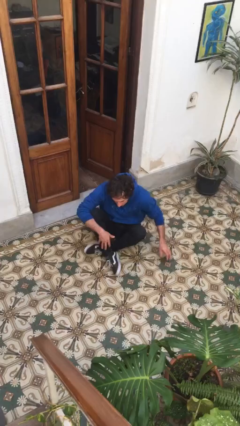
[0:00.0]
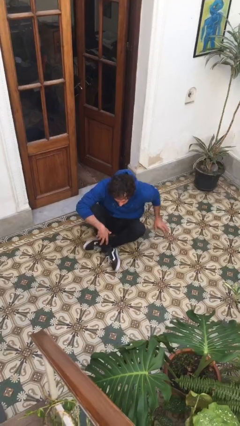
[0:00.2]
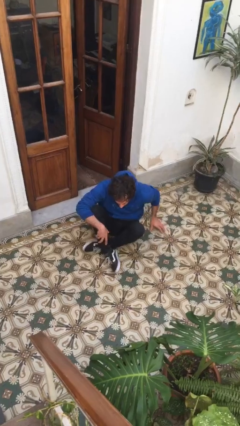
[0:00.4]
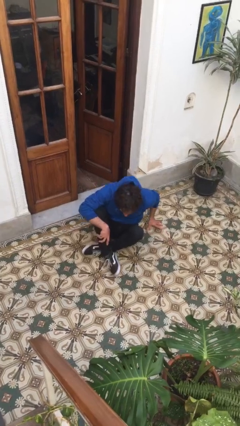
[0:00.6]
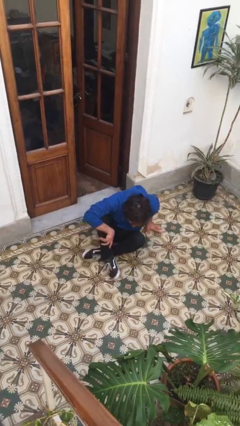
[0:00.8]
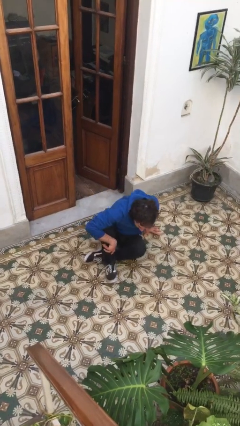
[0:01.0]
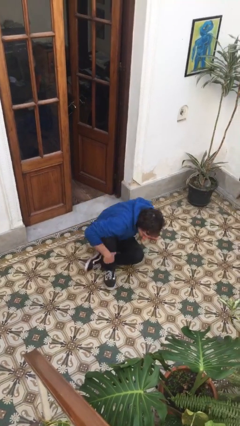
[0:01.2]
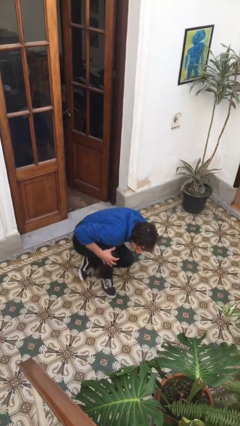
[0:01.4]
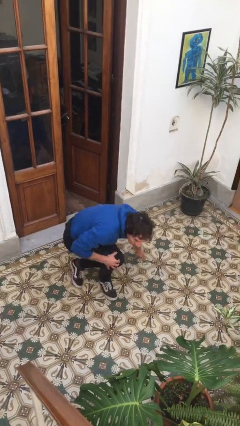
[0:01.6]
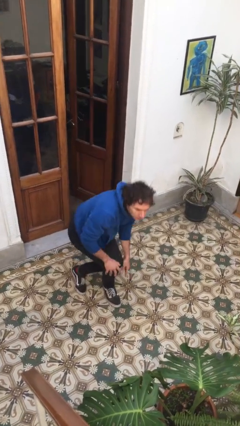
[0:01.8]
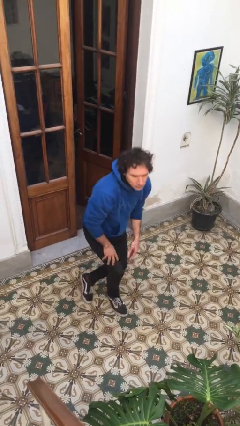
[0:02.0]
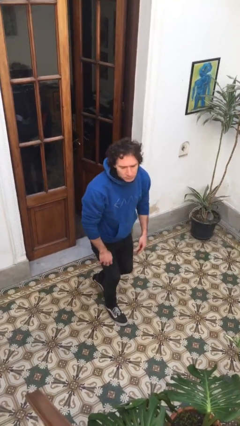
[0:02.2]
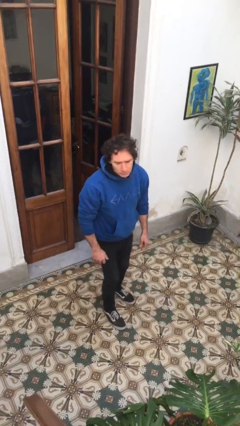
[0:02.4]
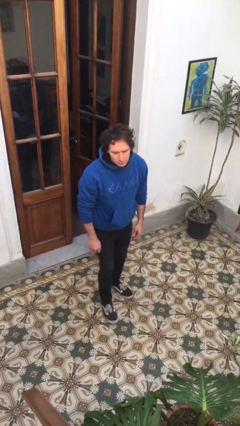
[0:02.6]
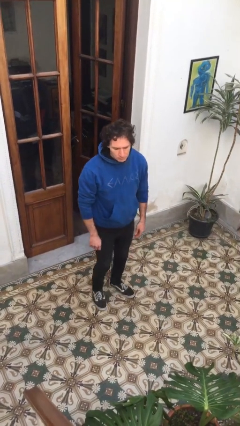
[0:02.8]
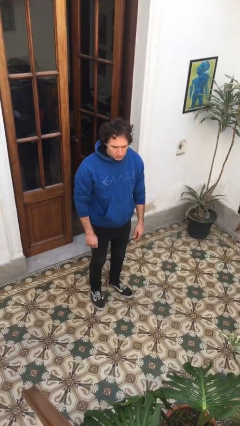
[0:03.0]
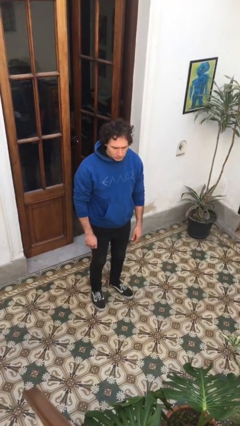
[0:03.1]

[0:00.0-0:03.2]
person stands up from floor

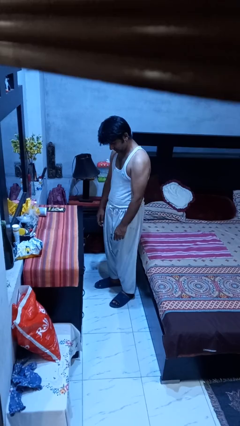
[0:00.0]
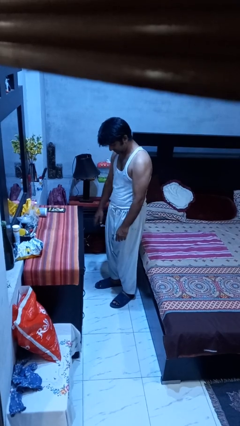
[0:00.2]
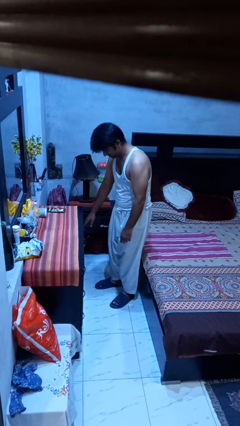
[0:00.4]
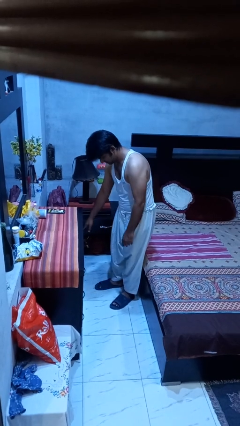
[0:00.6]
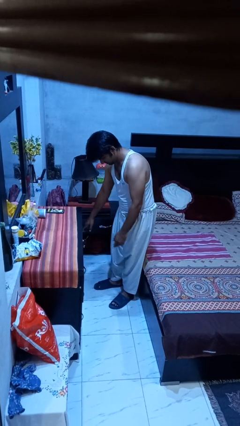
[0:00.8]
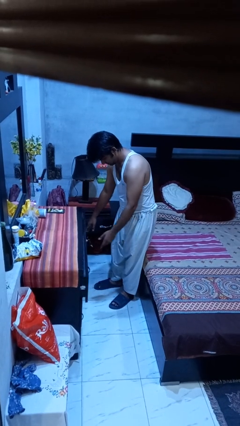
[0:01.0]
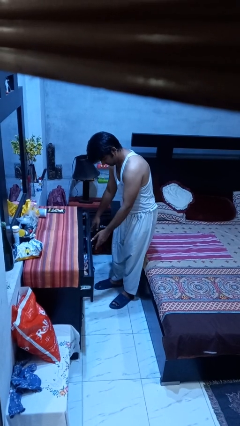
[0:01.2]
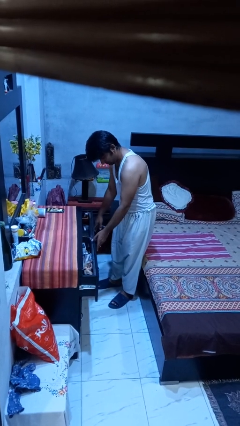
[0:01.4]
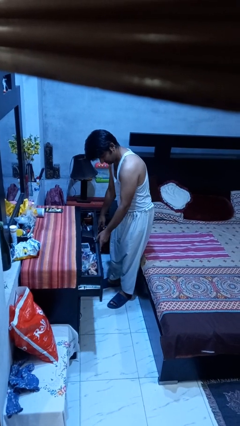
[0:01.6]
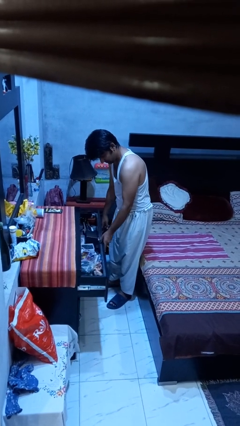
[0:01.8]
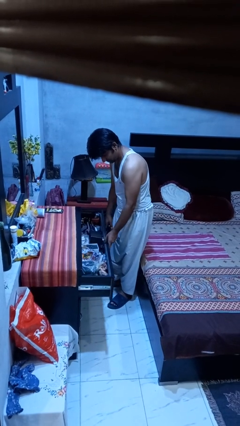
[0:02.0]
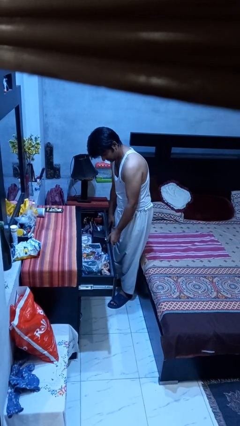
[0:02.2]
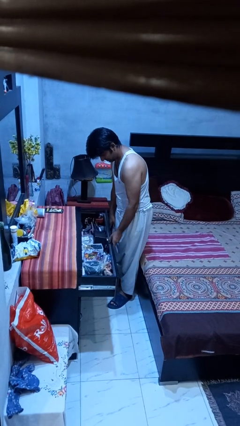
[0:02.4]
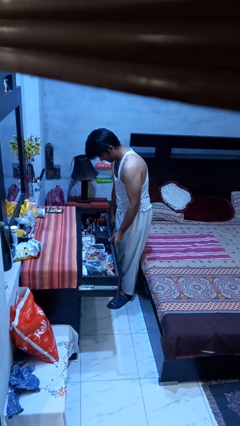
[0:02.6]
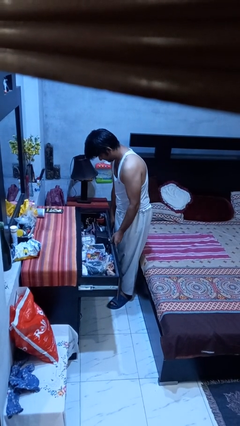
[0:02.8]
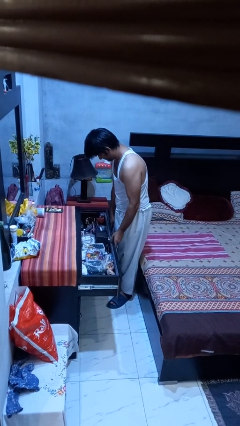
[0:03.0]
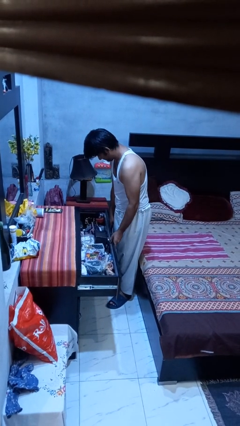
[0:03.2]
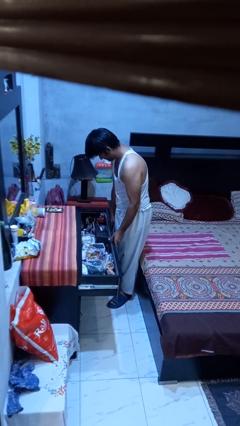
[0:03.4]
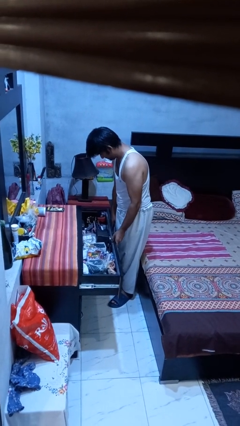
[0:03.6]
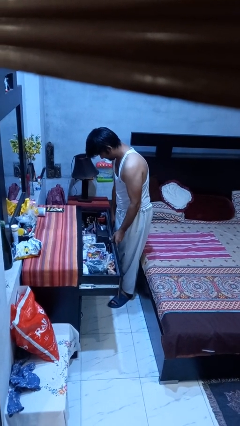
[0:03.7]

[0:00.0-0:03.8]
person opens dresser drawer

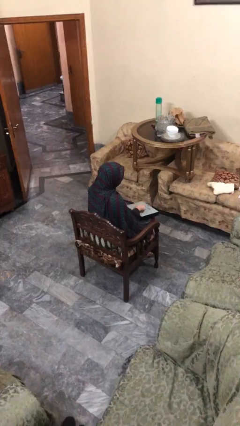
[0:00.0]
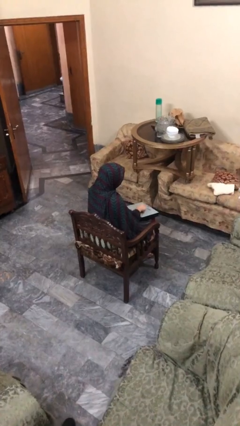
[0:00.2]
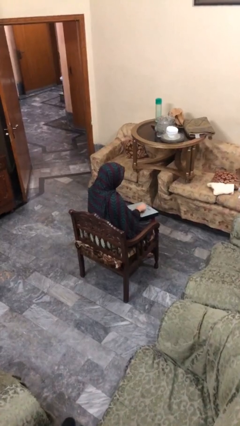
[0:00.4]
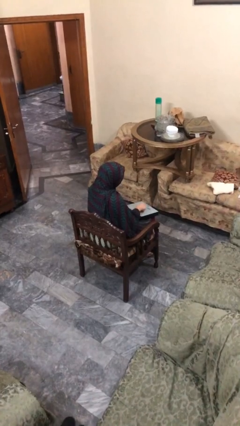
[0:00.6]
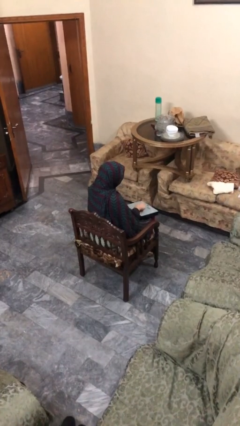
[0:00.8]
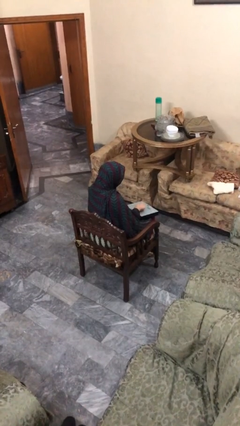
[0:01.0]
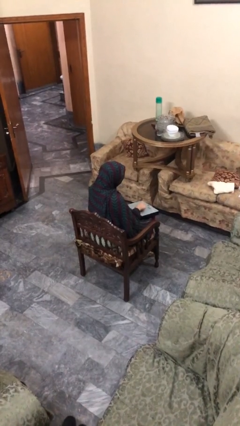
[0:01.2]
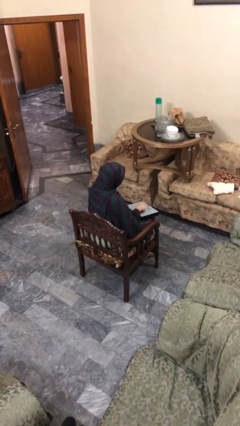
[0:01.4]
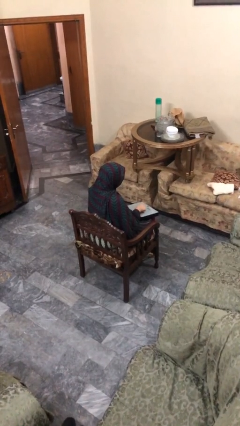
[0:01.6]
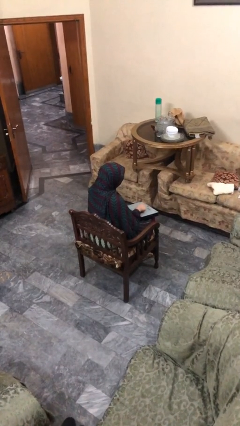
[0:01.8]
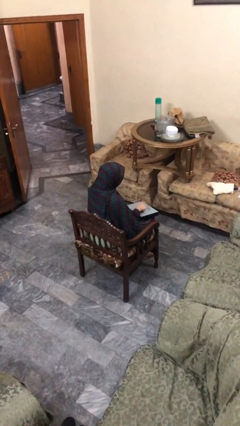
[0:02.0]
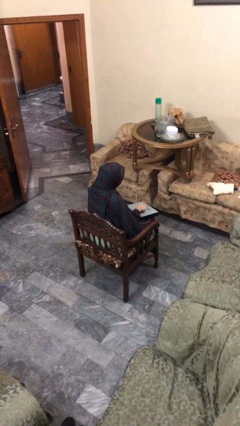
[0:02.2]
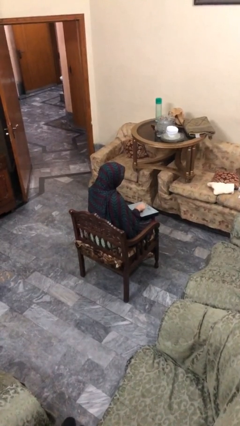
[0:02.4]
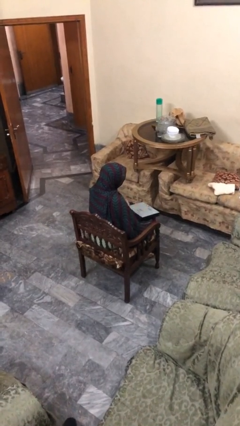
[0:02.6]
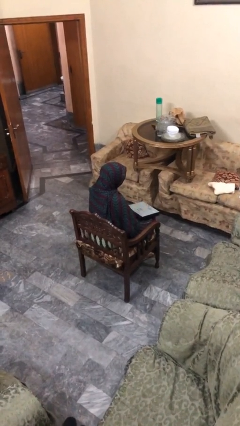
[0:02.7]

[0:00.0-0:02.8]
person taps object with finger

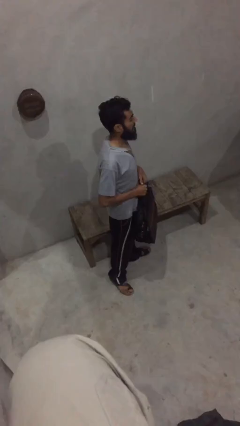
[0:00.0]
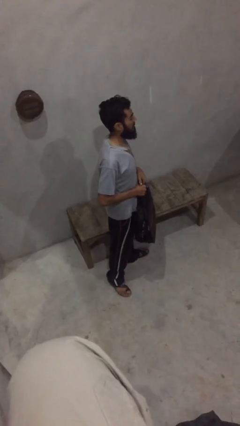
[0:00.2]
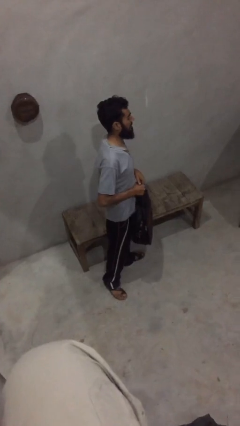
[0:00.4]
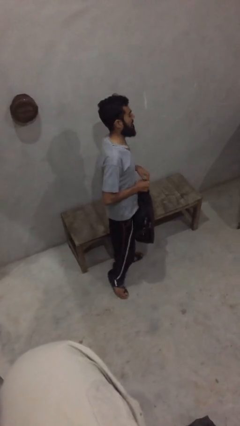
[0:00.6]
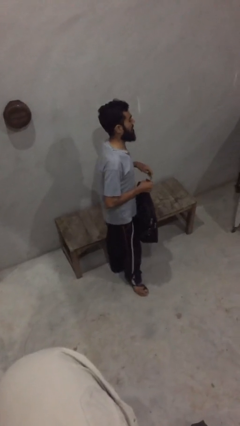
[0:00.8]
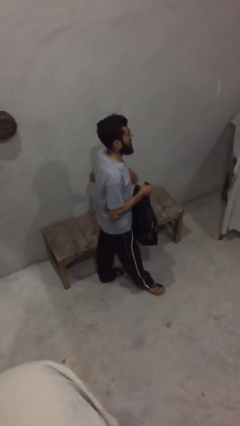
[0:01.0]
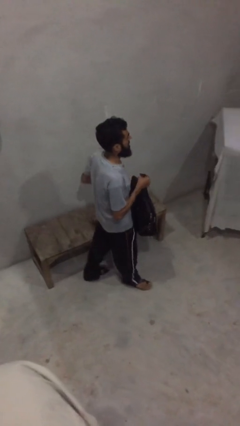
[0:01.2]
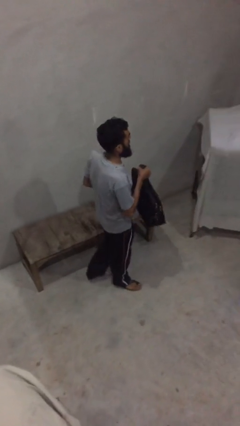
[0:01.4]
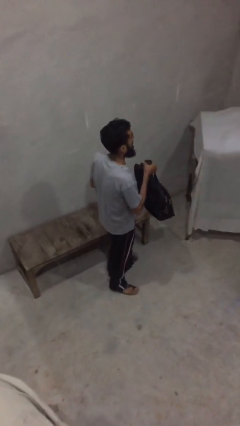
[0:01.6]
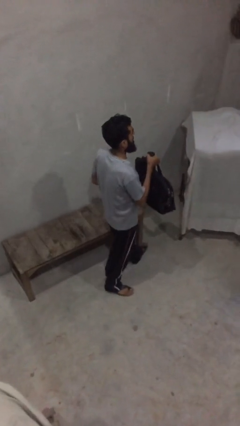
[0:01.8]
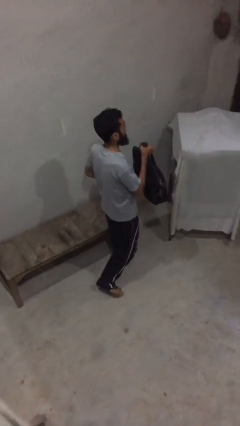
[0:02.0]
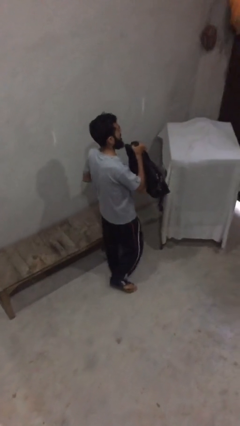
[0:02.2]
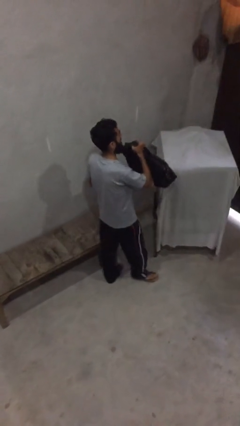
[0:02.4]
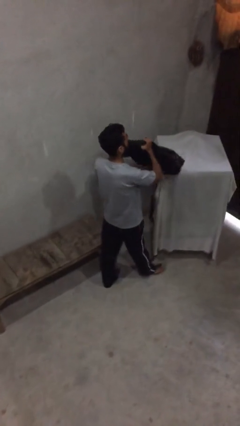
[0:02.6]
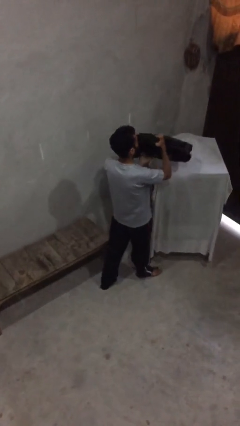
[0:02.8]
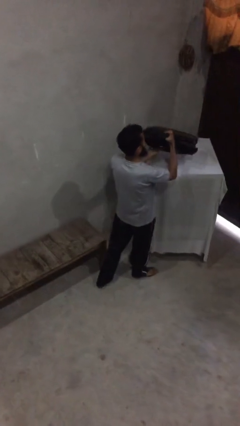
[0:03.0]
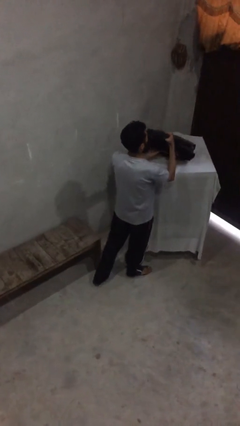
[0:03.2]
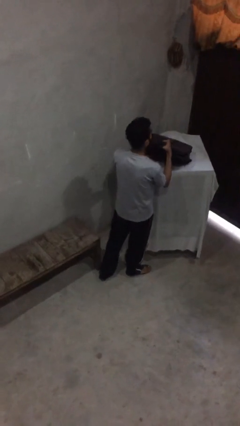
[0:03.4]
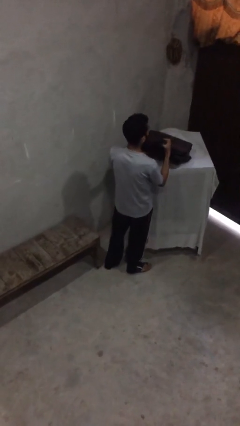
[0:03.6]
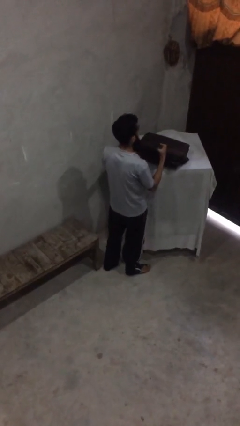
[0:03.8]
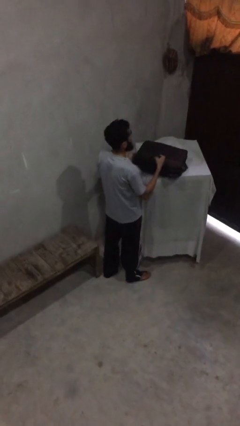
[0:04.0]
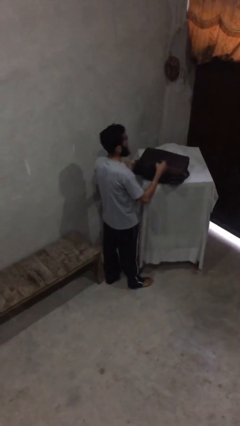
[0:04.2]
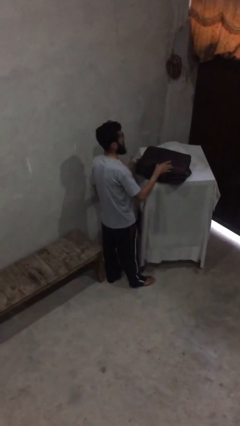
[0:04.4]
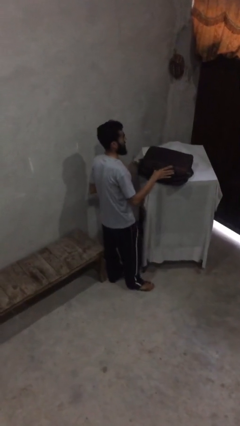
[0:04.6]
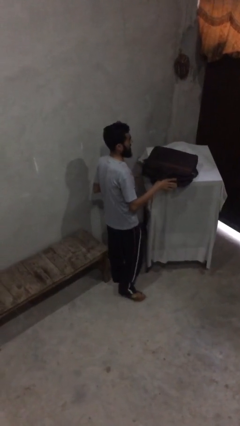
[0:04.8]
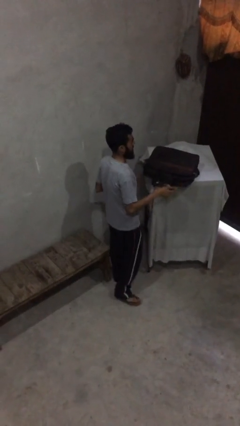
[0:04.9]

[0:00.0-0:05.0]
person puts down object on shelf

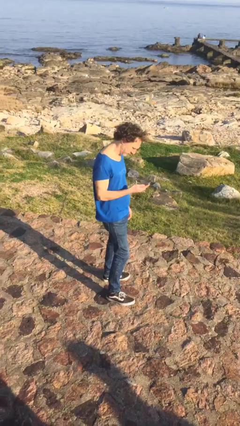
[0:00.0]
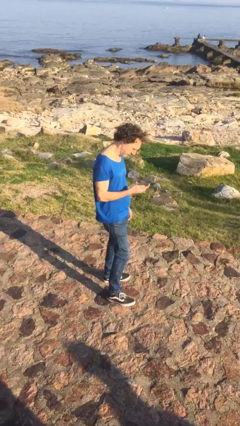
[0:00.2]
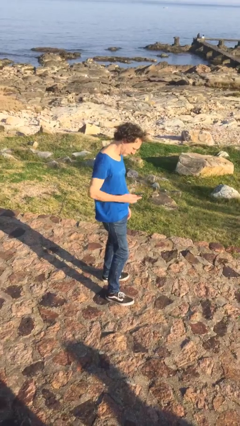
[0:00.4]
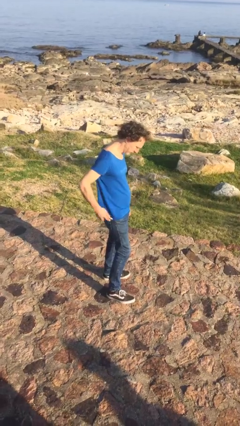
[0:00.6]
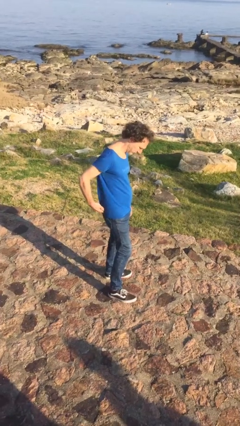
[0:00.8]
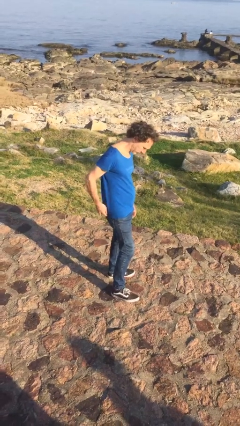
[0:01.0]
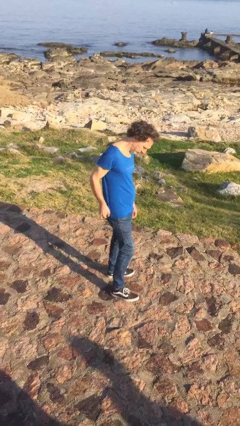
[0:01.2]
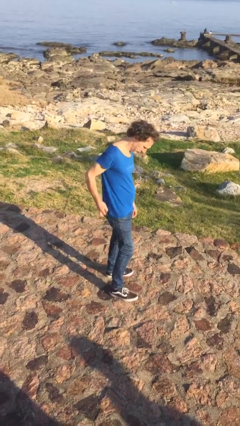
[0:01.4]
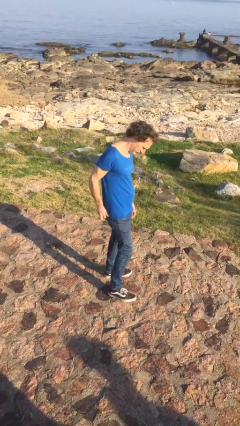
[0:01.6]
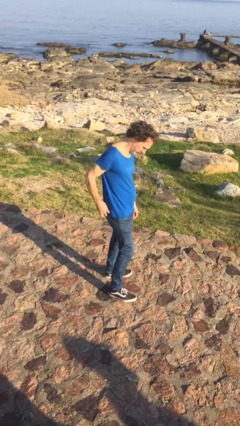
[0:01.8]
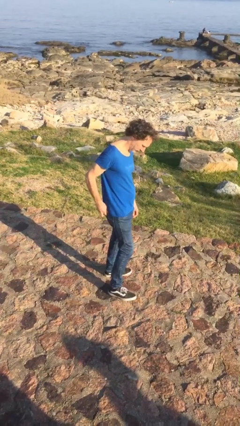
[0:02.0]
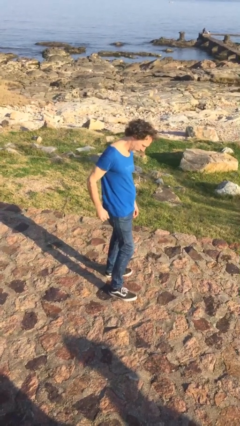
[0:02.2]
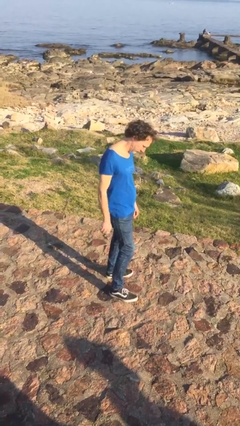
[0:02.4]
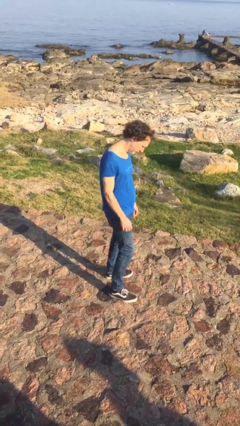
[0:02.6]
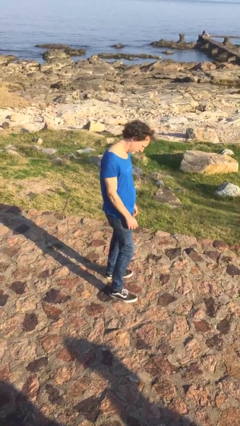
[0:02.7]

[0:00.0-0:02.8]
person puts phone into pocket
